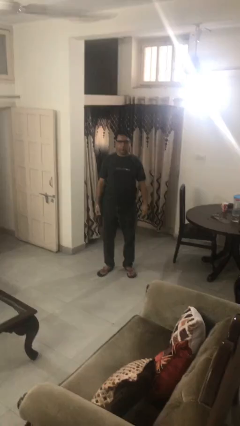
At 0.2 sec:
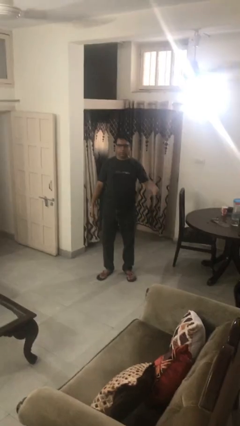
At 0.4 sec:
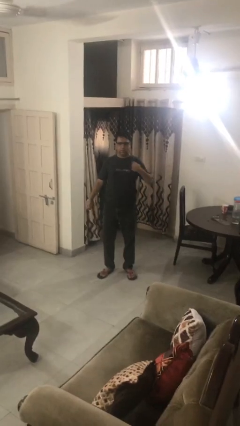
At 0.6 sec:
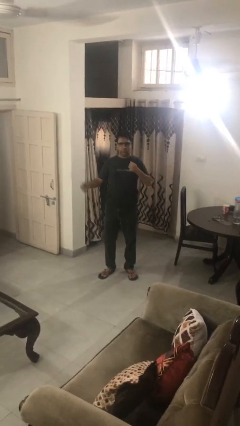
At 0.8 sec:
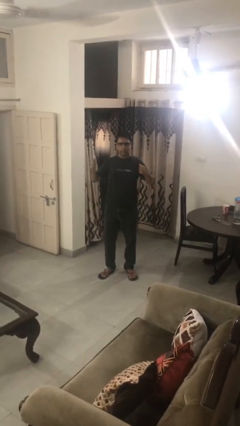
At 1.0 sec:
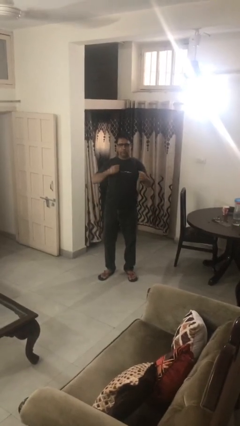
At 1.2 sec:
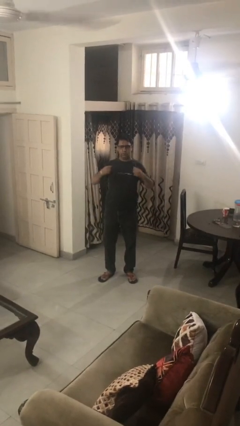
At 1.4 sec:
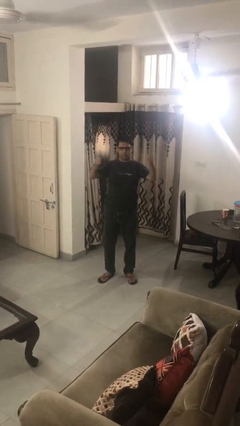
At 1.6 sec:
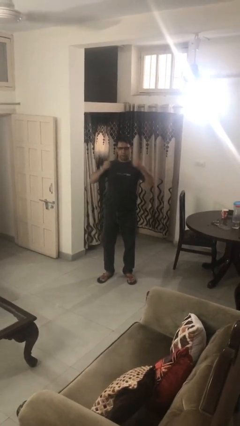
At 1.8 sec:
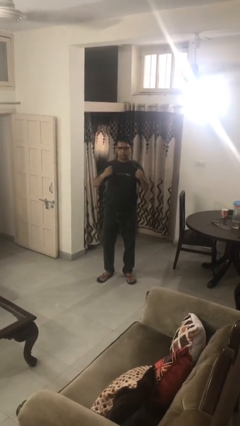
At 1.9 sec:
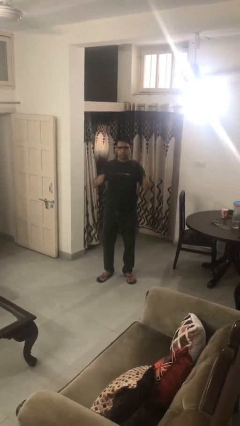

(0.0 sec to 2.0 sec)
person drums on chest

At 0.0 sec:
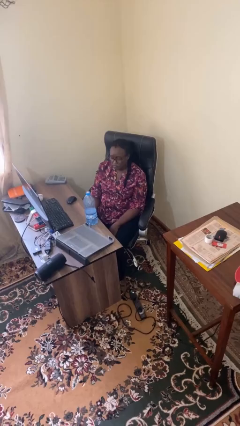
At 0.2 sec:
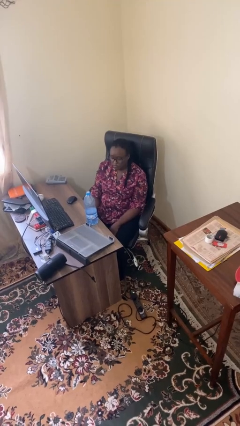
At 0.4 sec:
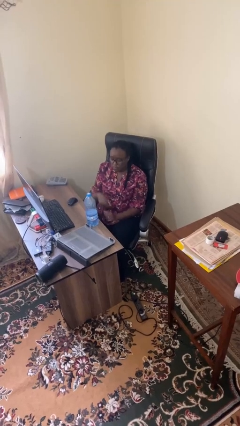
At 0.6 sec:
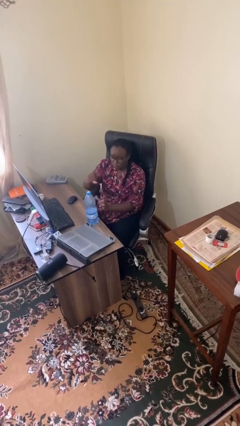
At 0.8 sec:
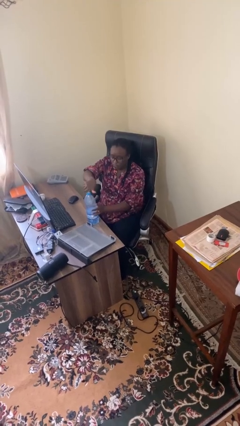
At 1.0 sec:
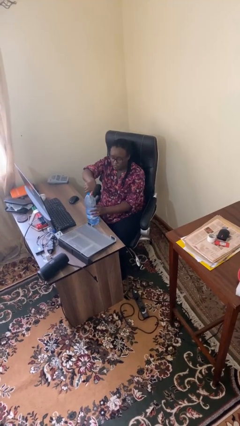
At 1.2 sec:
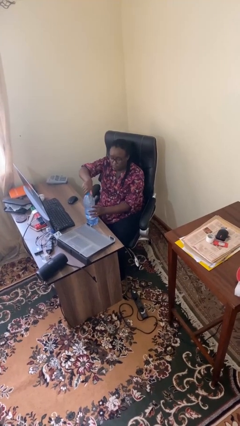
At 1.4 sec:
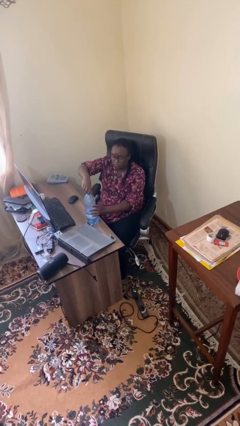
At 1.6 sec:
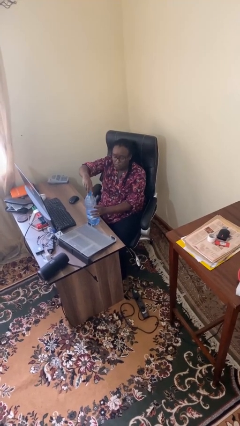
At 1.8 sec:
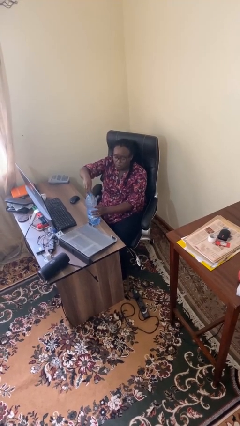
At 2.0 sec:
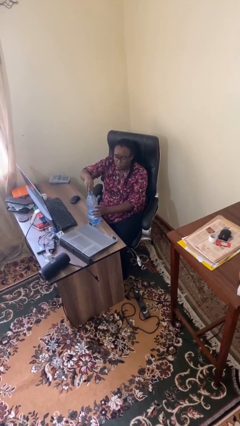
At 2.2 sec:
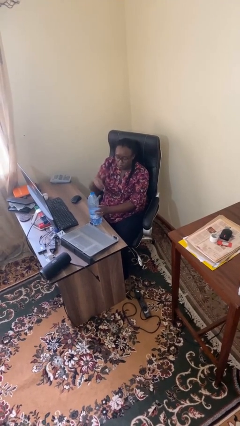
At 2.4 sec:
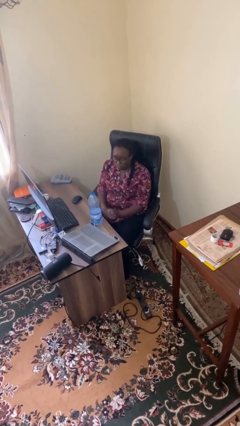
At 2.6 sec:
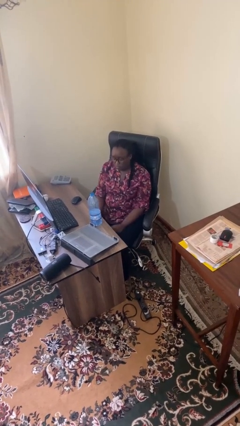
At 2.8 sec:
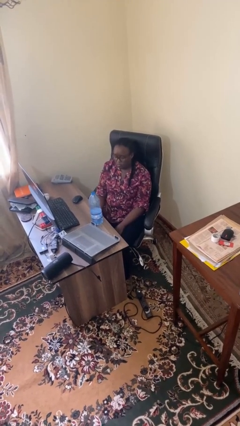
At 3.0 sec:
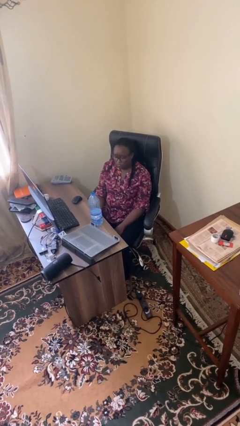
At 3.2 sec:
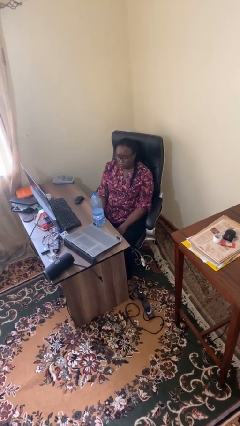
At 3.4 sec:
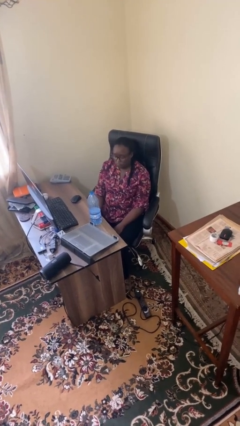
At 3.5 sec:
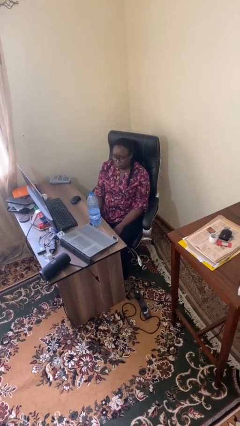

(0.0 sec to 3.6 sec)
person unscrews lid from bottle

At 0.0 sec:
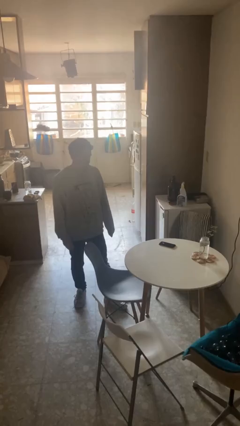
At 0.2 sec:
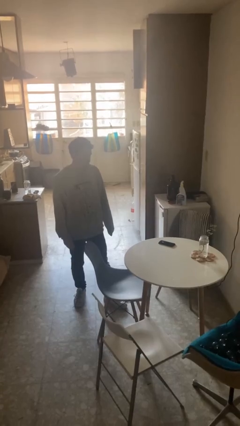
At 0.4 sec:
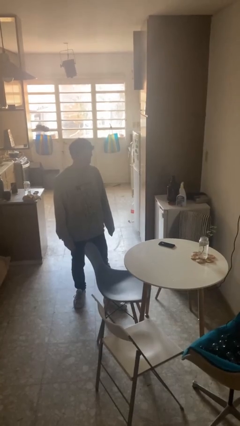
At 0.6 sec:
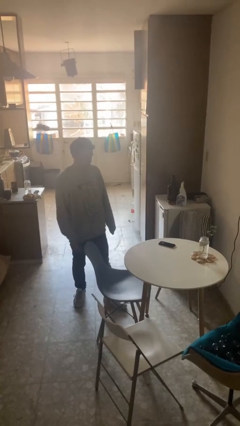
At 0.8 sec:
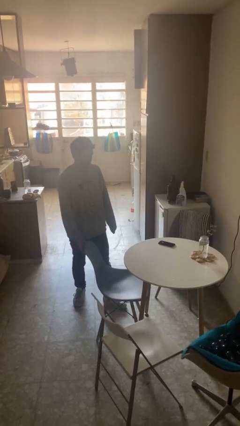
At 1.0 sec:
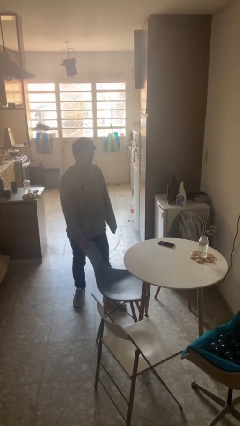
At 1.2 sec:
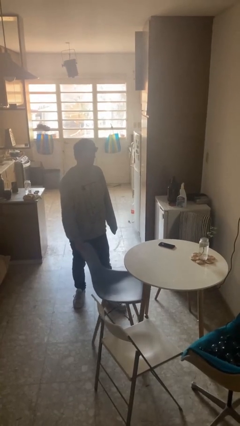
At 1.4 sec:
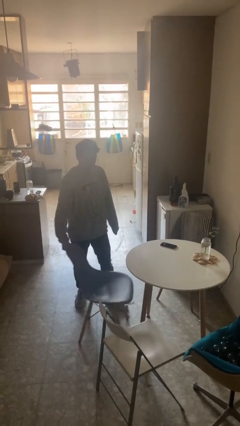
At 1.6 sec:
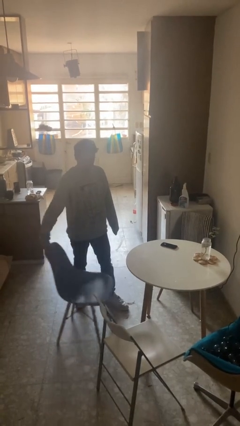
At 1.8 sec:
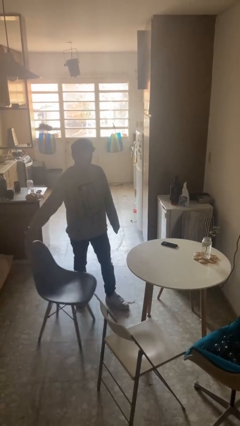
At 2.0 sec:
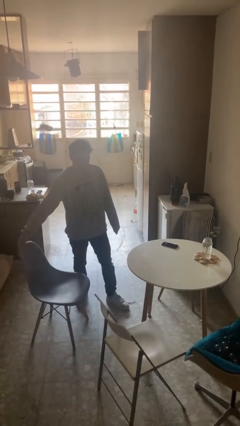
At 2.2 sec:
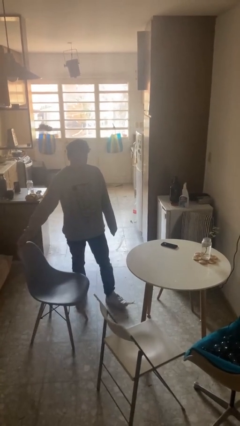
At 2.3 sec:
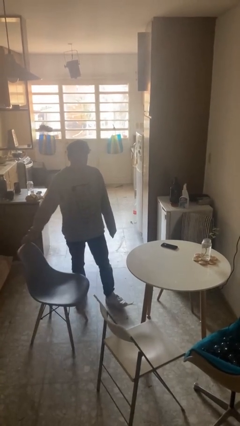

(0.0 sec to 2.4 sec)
person pulls out chair

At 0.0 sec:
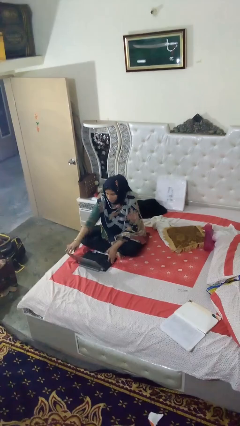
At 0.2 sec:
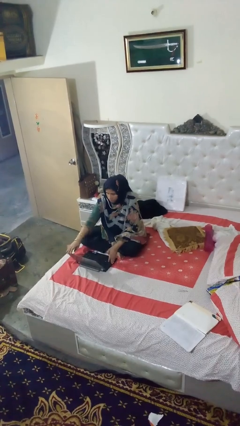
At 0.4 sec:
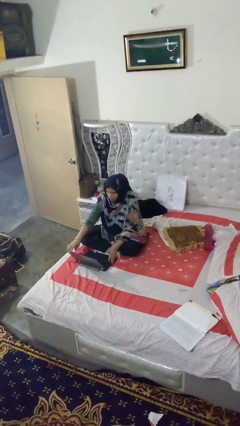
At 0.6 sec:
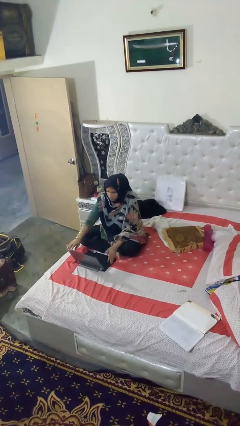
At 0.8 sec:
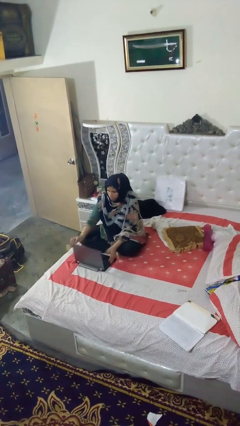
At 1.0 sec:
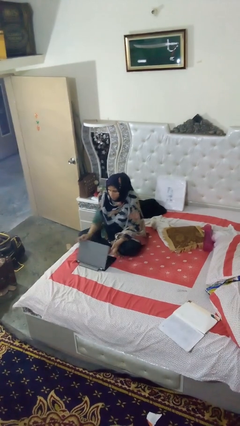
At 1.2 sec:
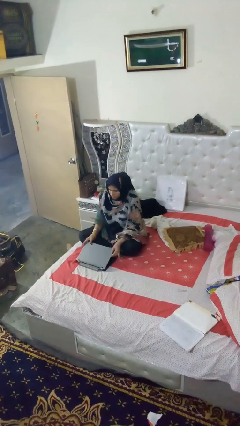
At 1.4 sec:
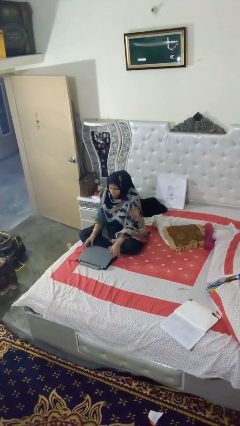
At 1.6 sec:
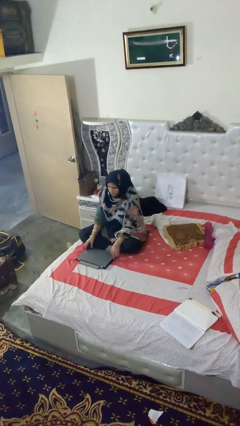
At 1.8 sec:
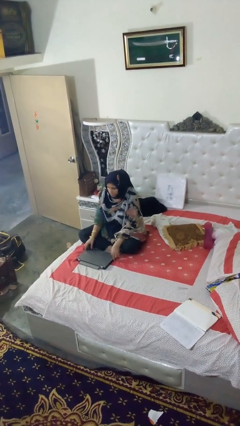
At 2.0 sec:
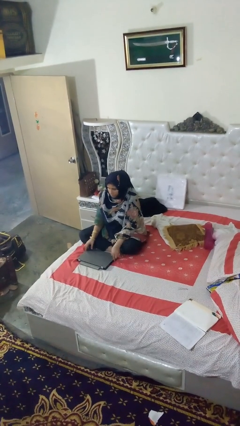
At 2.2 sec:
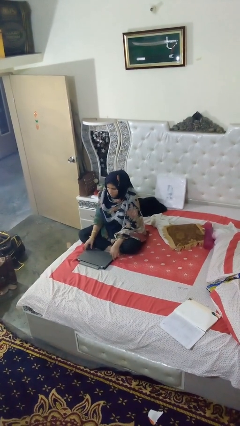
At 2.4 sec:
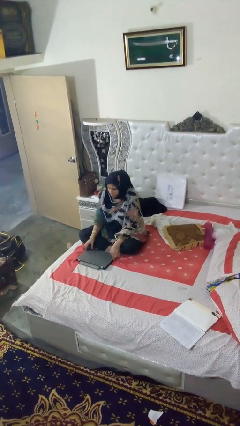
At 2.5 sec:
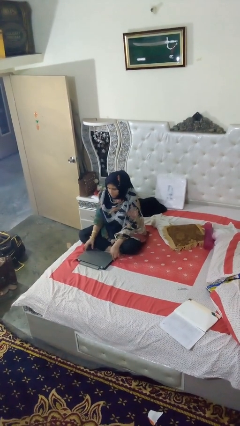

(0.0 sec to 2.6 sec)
person closes laptop

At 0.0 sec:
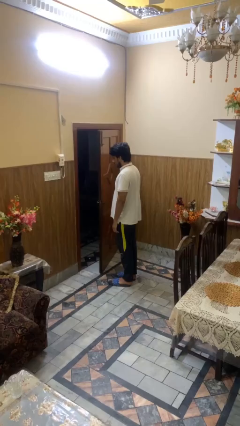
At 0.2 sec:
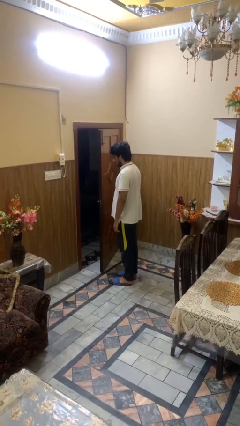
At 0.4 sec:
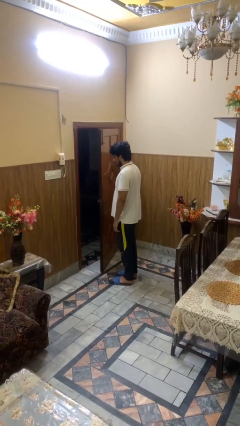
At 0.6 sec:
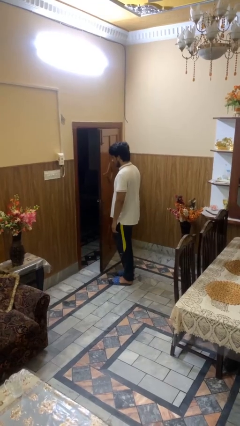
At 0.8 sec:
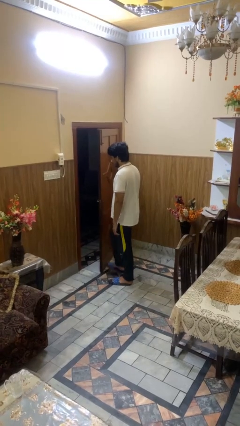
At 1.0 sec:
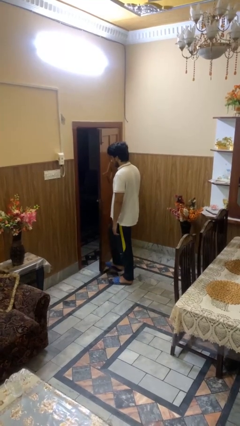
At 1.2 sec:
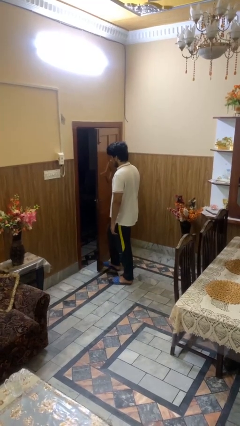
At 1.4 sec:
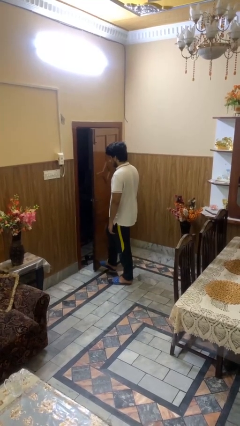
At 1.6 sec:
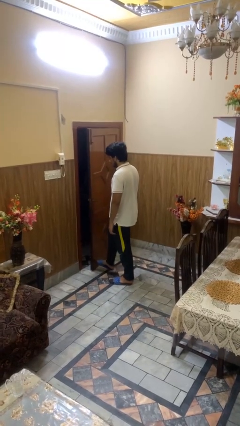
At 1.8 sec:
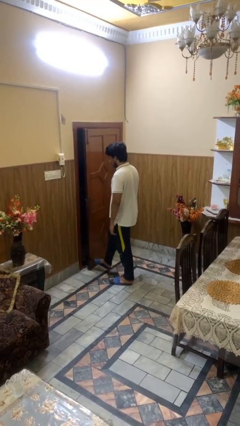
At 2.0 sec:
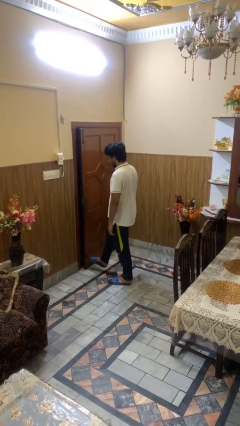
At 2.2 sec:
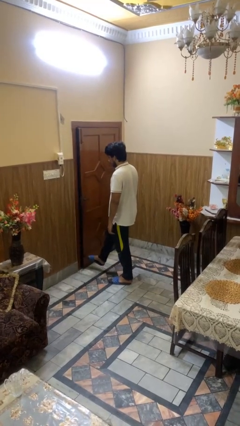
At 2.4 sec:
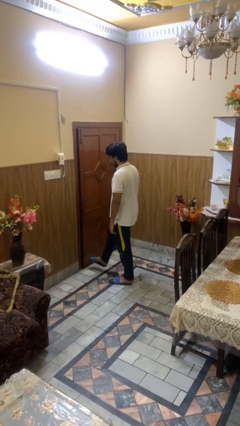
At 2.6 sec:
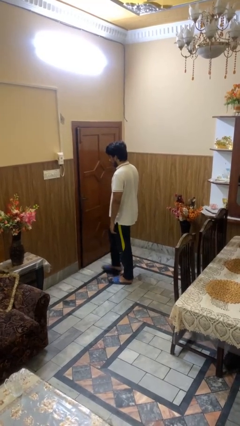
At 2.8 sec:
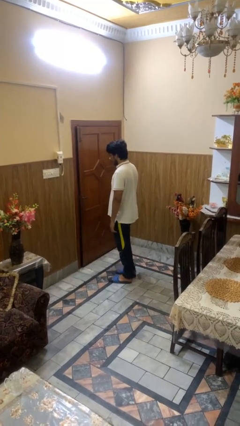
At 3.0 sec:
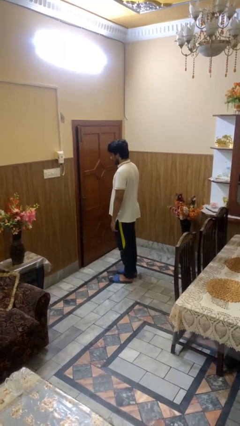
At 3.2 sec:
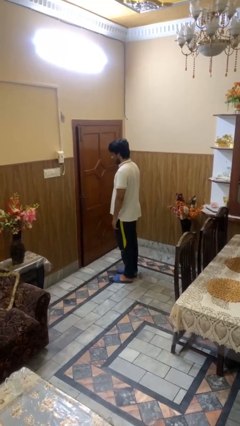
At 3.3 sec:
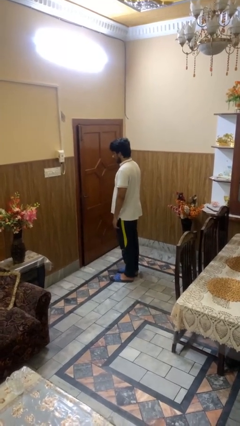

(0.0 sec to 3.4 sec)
person closes door with foot

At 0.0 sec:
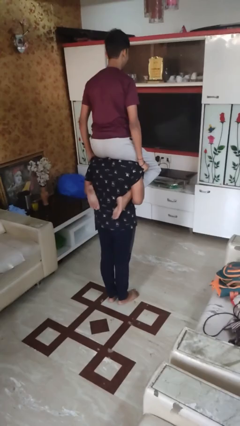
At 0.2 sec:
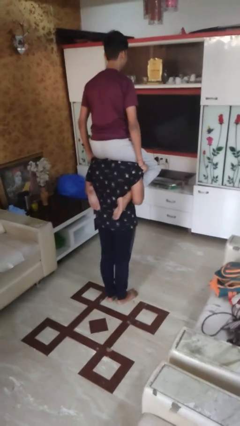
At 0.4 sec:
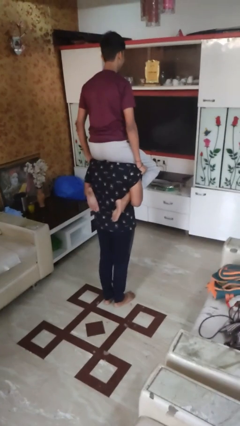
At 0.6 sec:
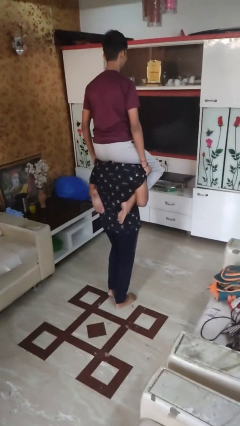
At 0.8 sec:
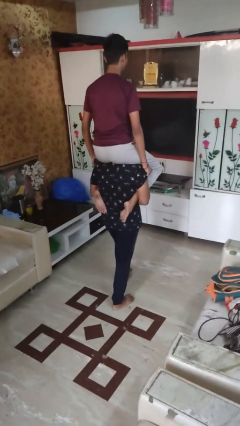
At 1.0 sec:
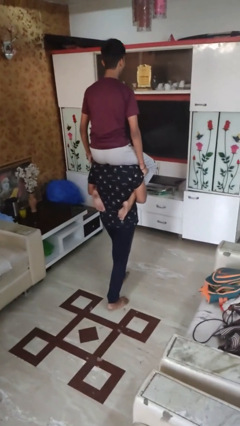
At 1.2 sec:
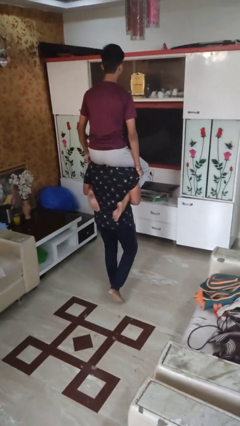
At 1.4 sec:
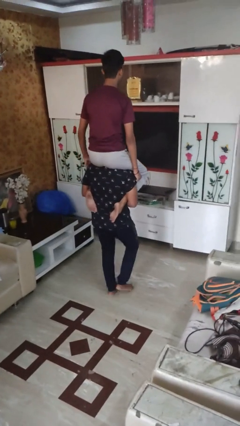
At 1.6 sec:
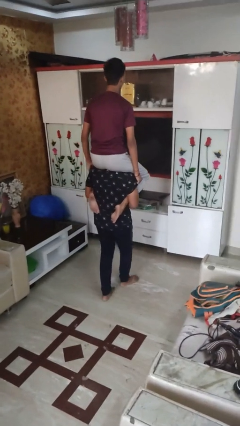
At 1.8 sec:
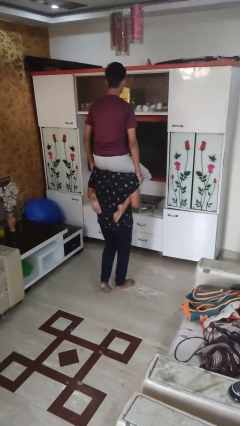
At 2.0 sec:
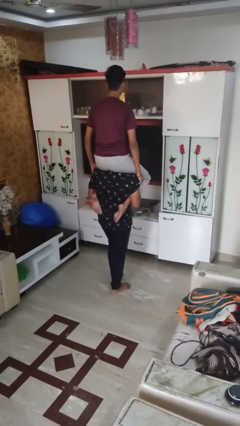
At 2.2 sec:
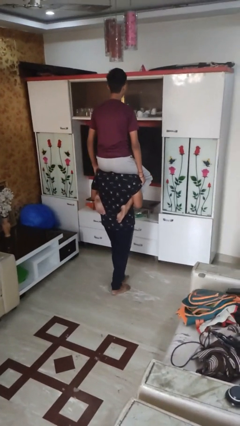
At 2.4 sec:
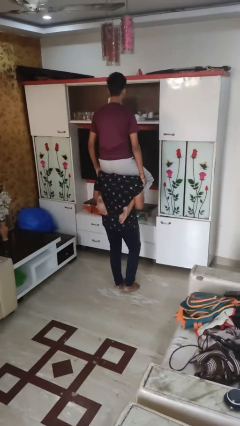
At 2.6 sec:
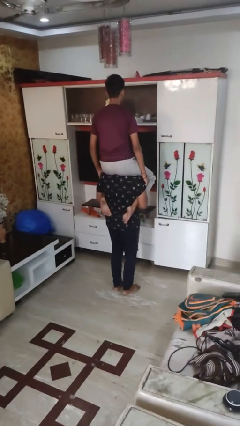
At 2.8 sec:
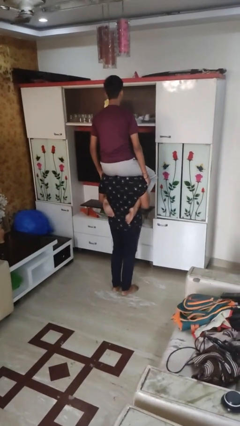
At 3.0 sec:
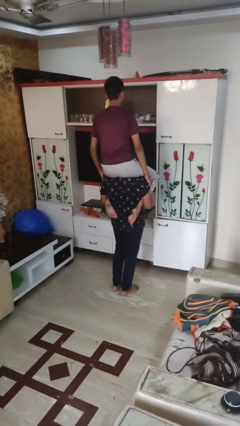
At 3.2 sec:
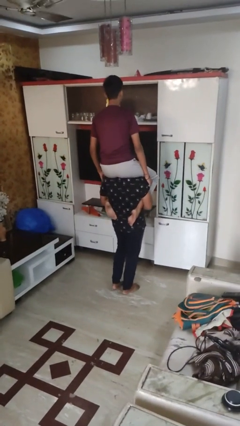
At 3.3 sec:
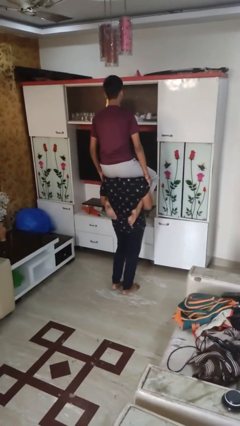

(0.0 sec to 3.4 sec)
person carries person on shoulders
